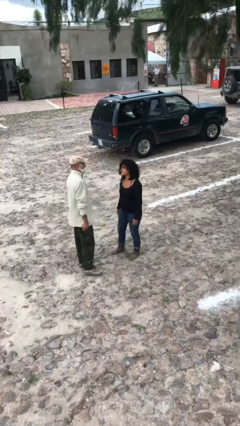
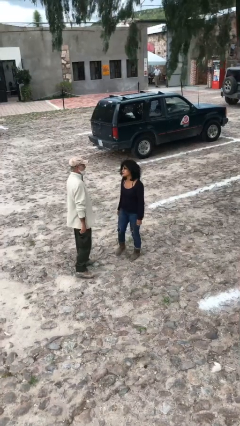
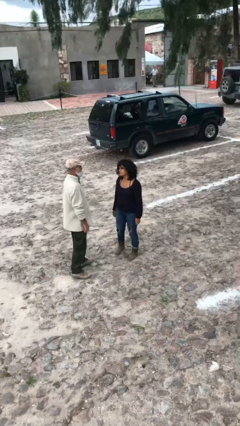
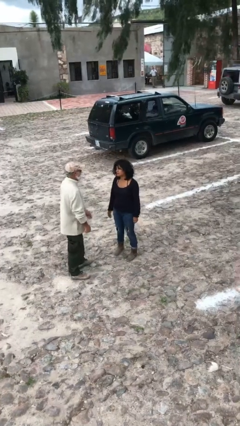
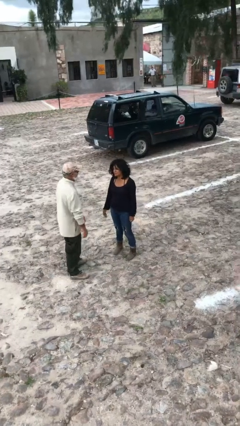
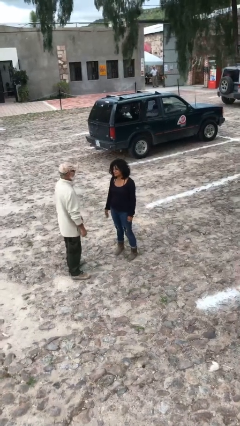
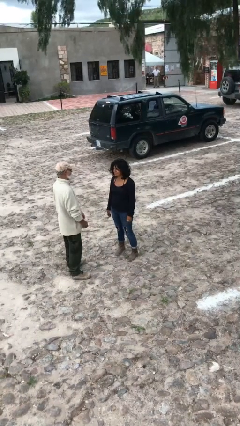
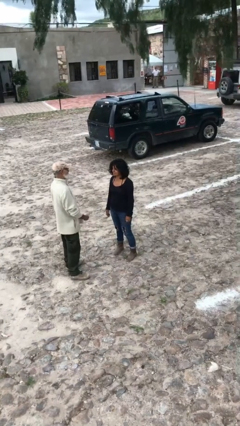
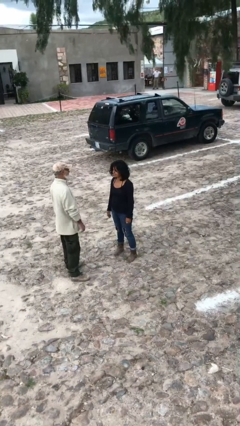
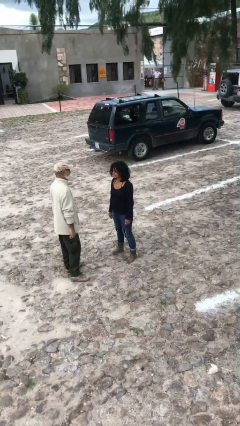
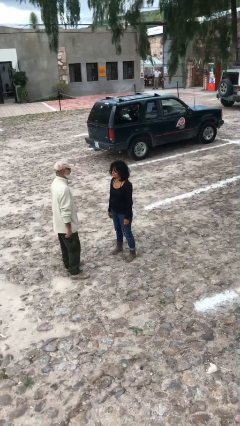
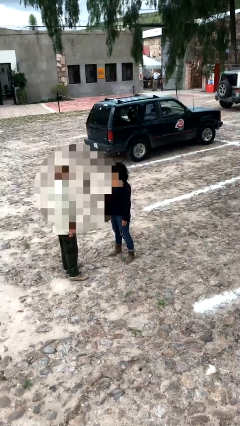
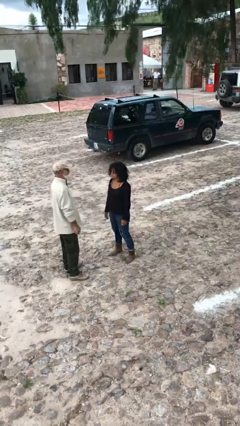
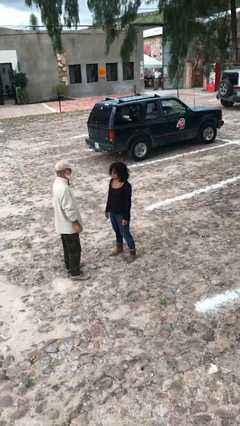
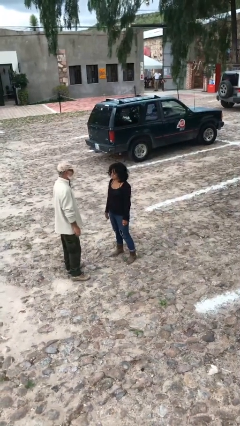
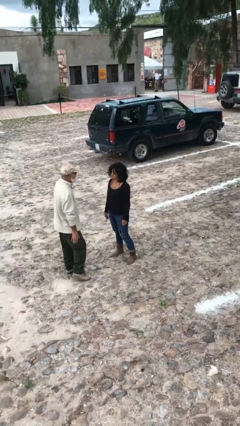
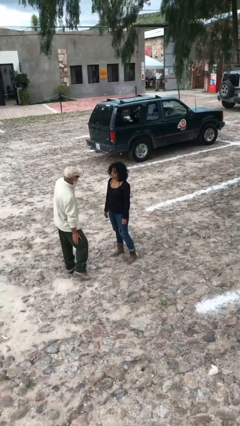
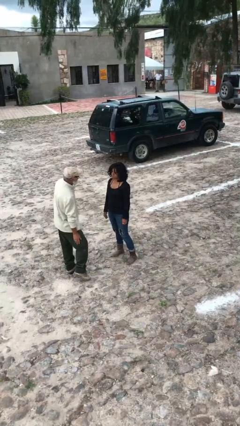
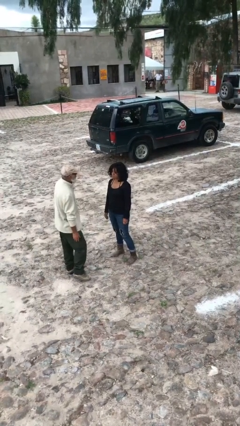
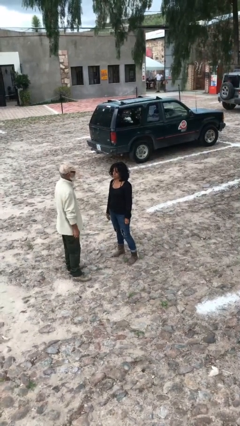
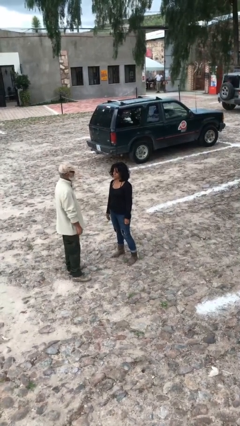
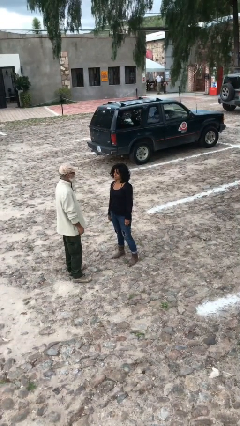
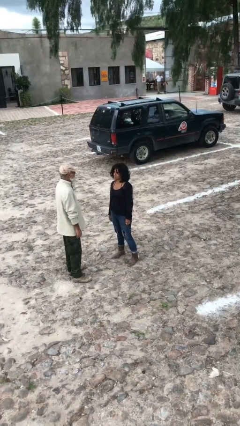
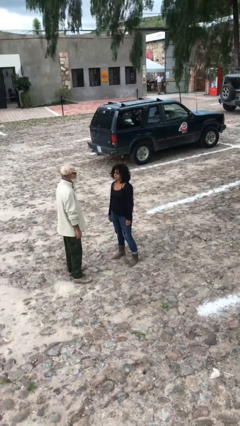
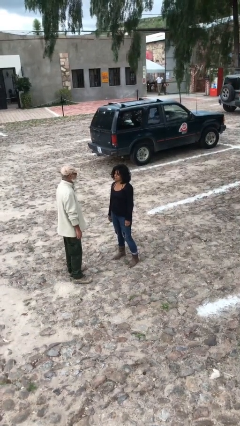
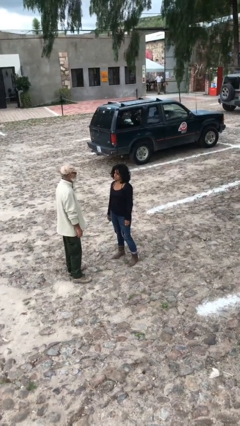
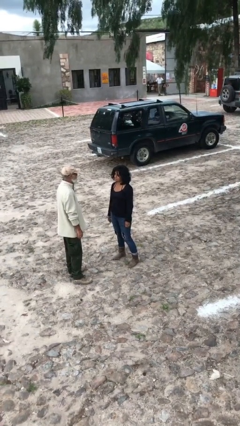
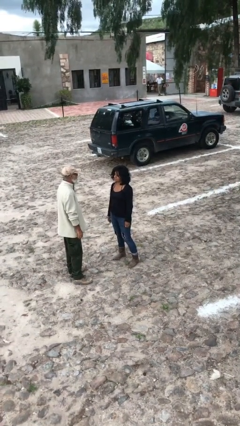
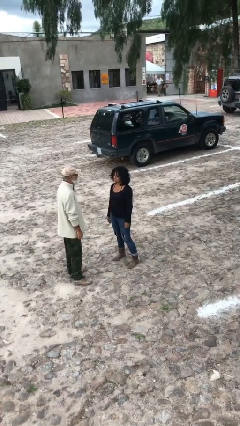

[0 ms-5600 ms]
person talks to person

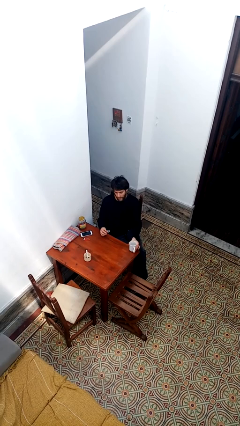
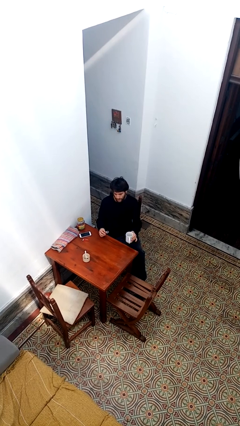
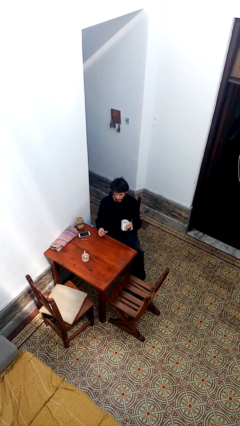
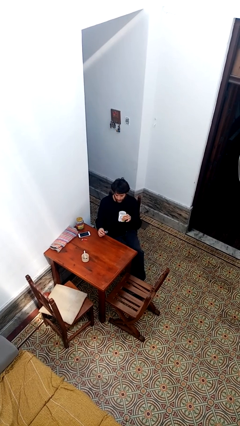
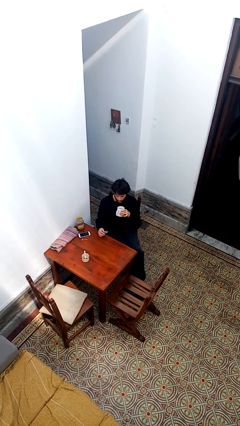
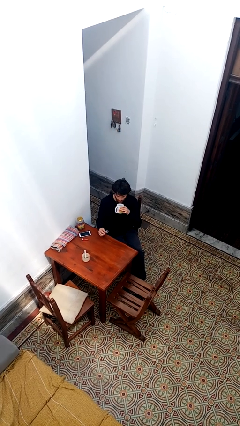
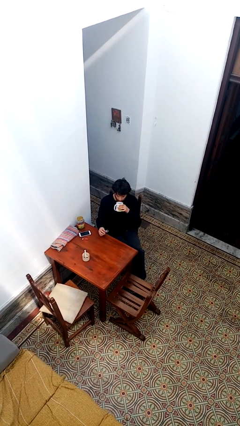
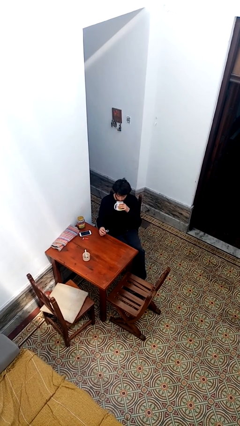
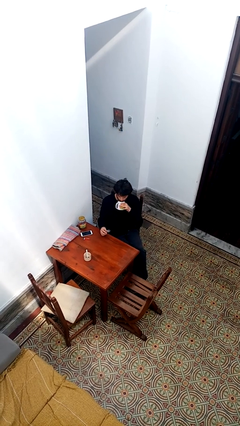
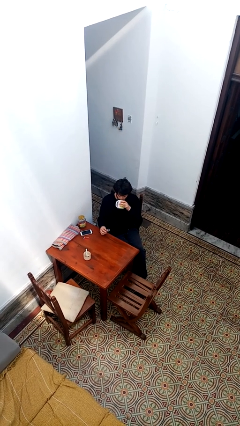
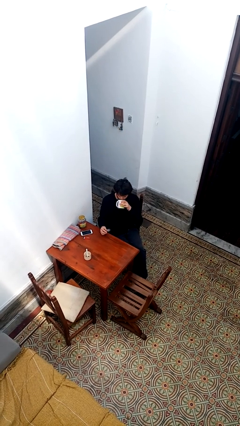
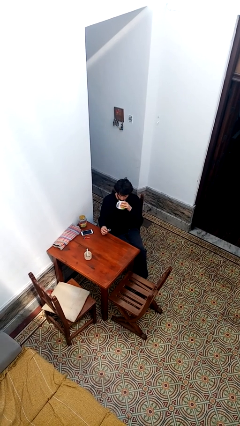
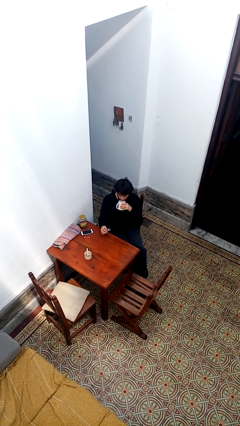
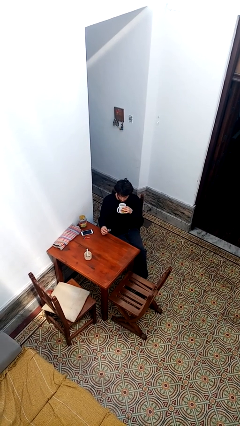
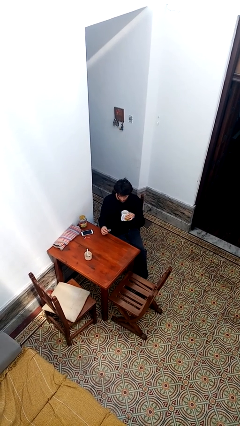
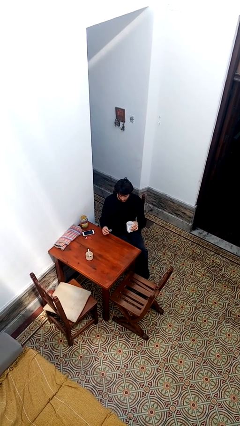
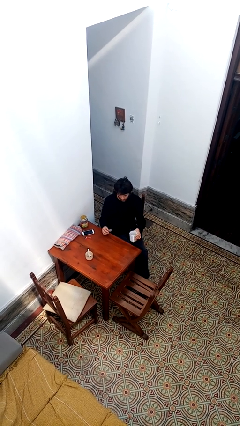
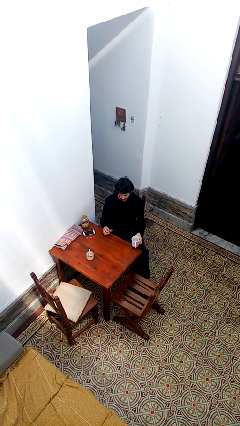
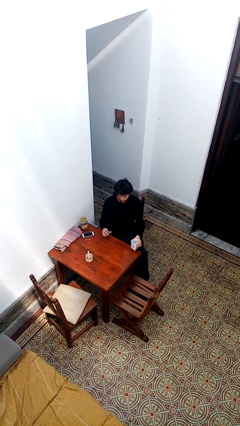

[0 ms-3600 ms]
person drinks from cup

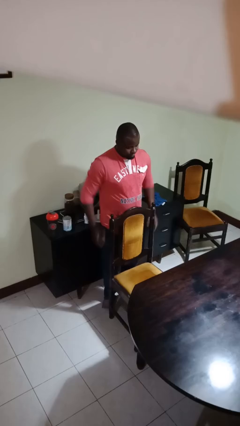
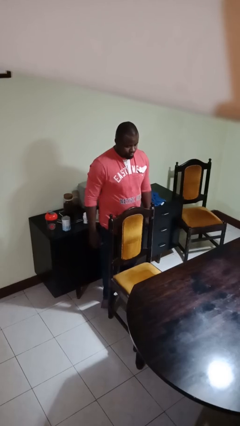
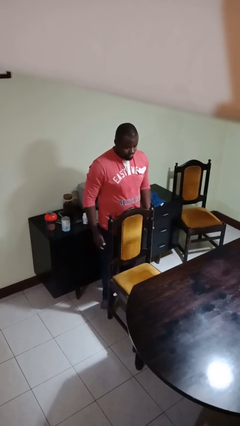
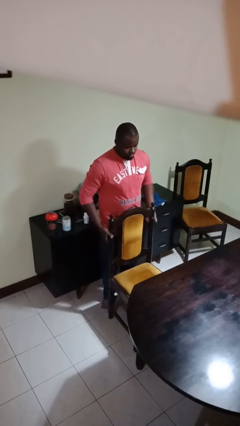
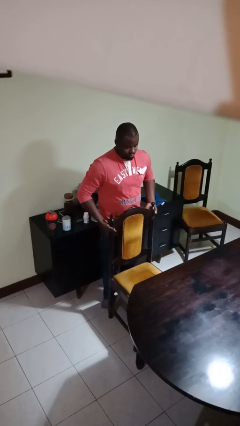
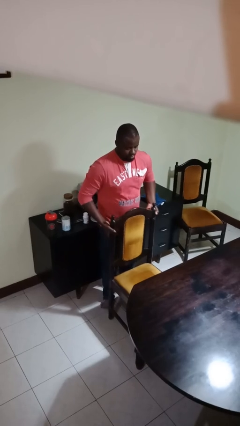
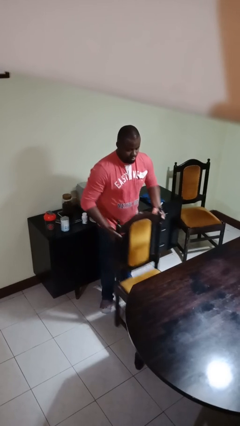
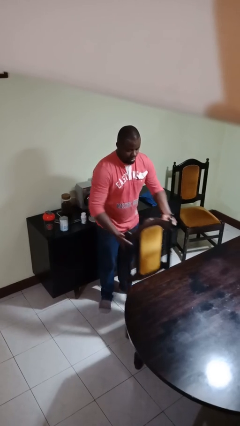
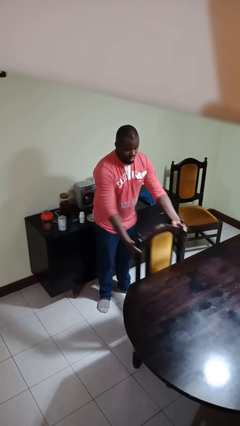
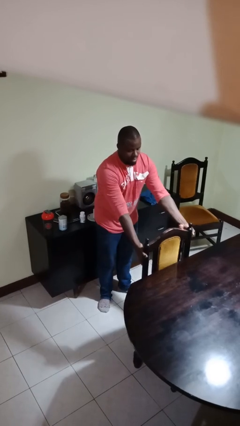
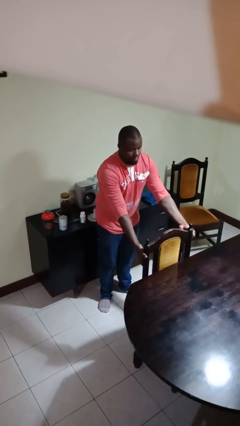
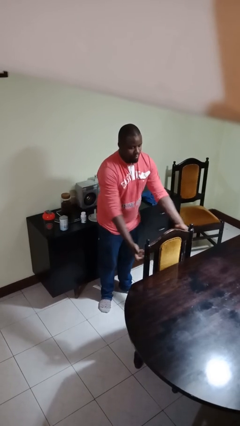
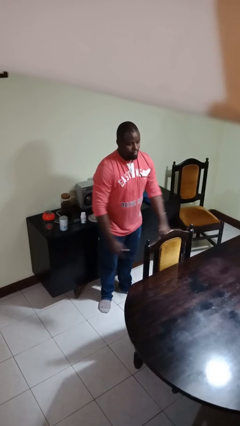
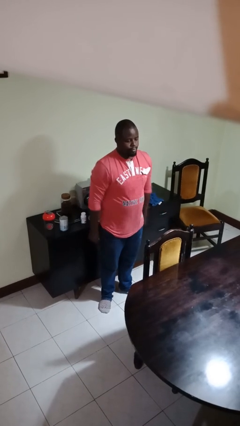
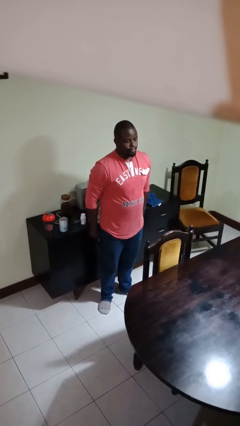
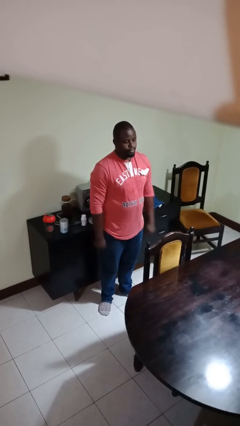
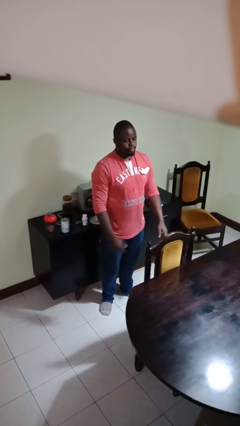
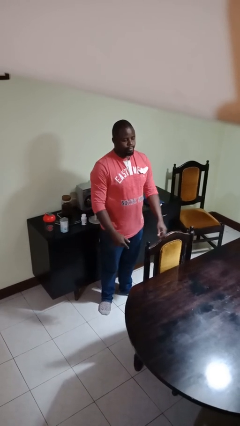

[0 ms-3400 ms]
person pushes in chair

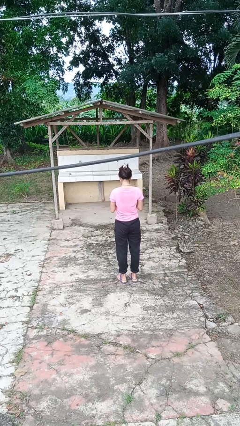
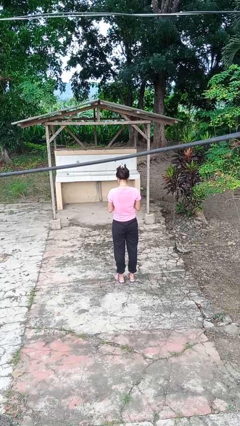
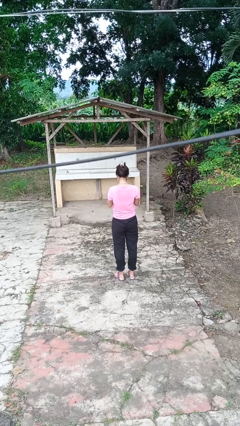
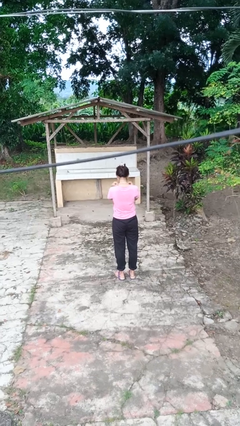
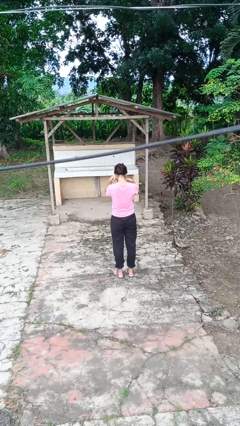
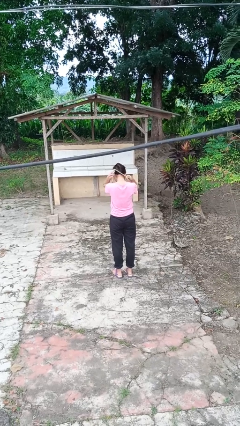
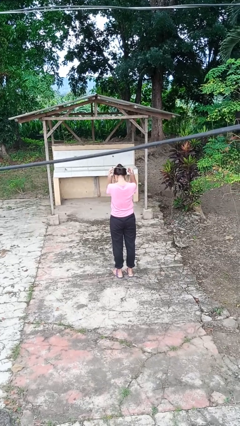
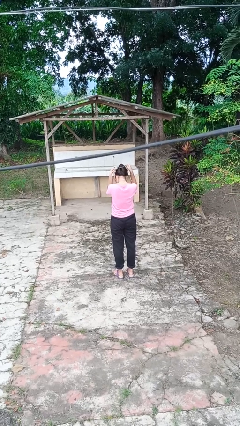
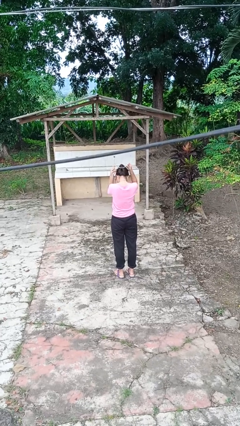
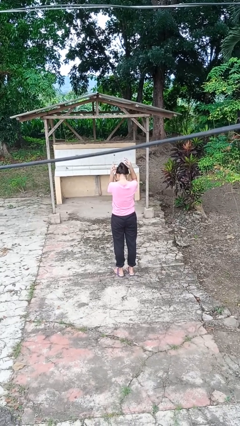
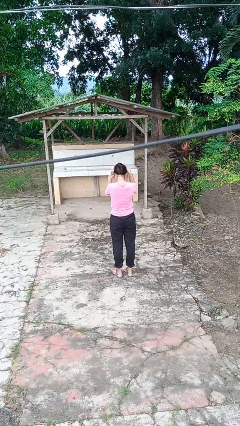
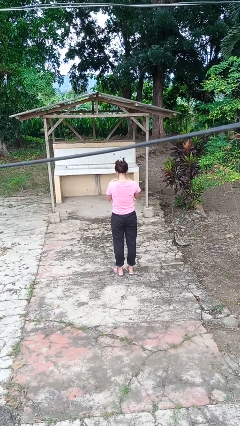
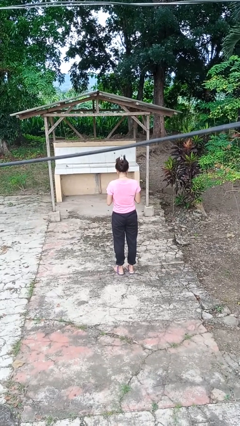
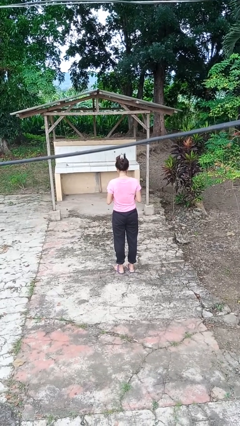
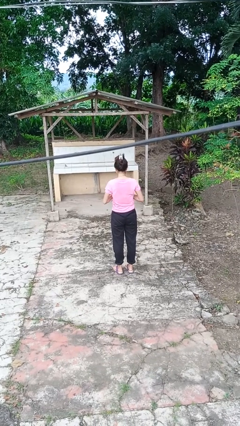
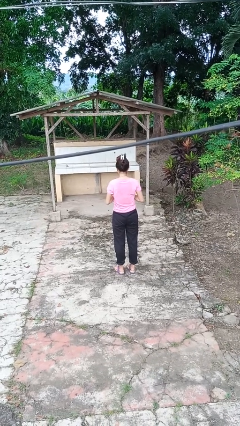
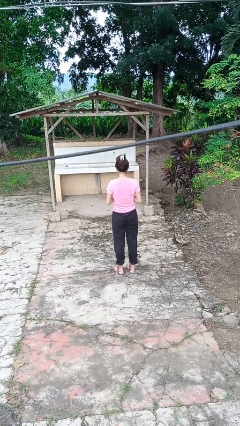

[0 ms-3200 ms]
person takes off necklace

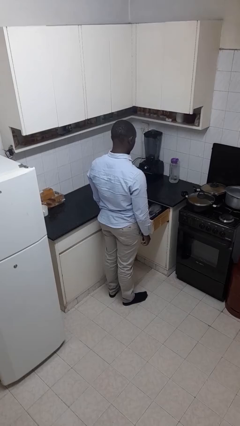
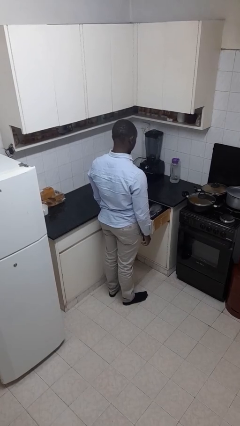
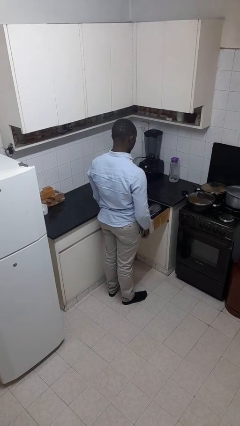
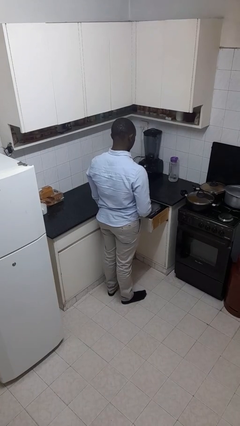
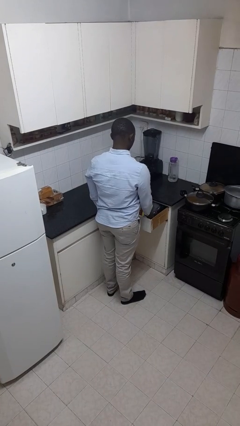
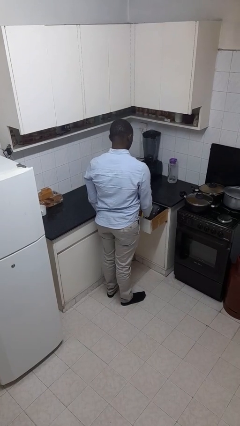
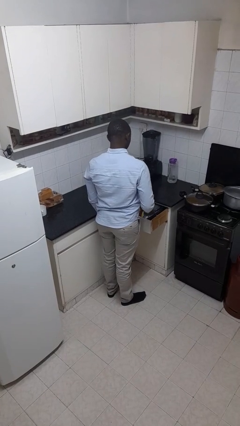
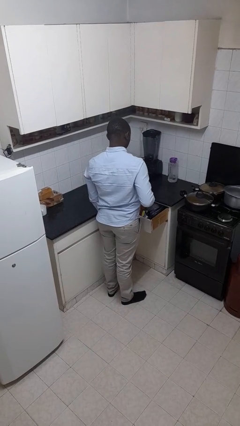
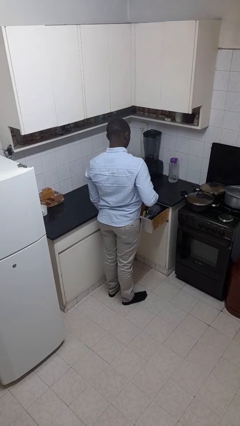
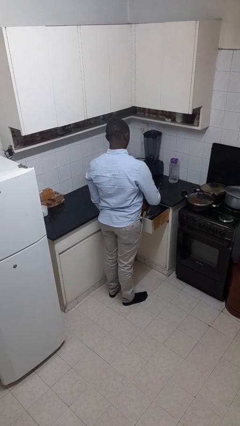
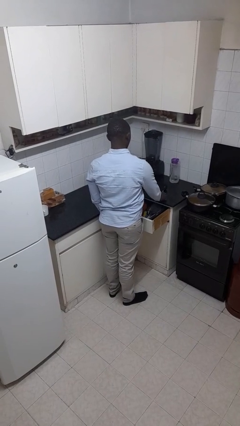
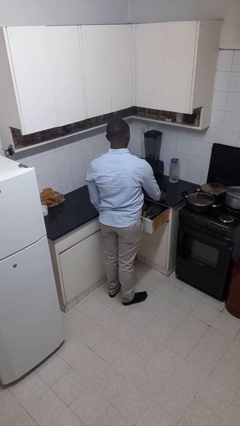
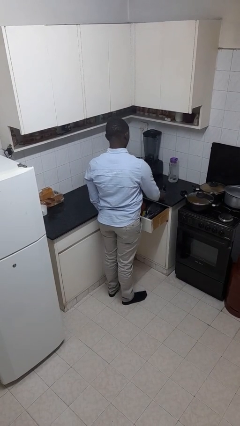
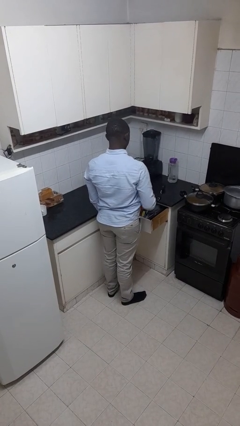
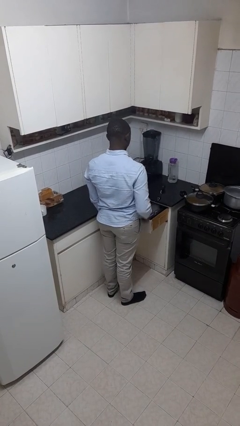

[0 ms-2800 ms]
person takes object from kitchen drawer
